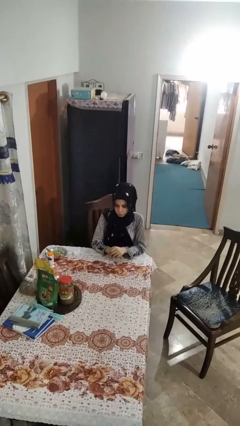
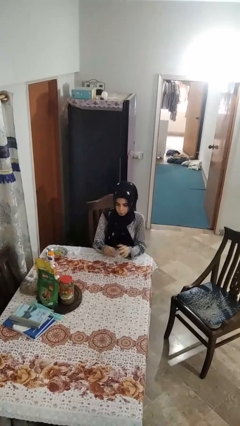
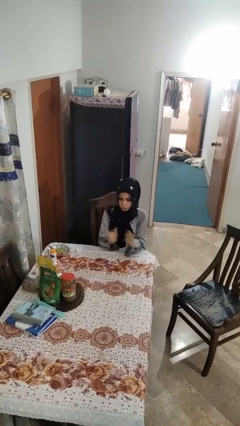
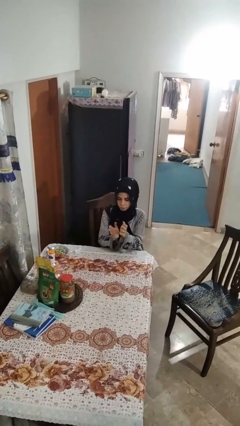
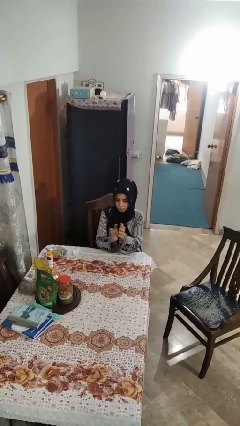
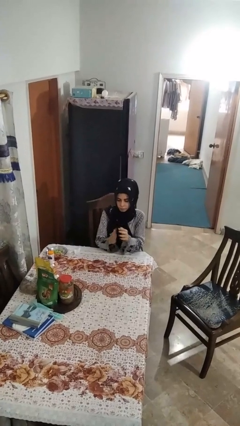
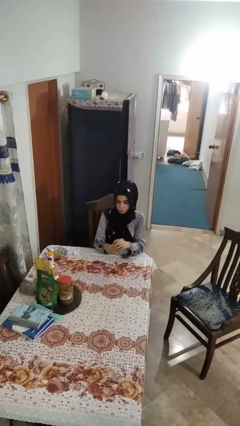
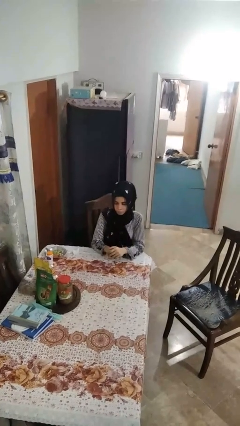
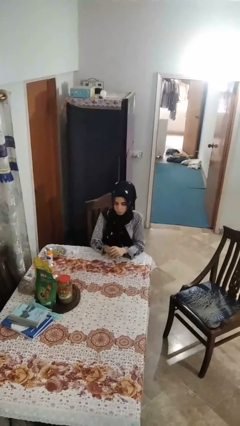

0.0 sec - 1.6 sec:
person claps hands

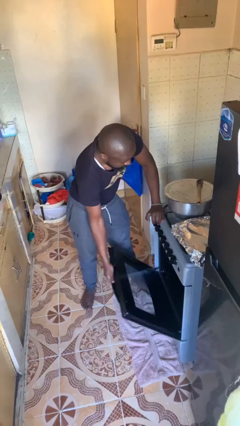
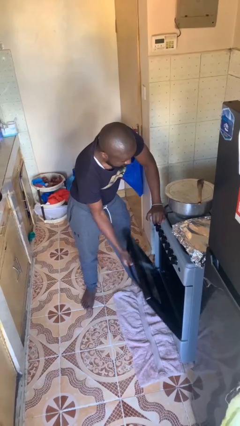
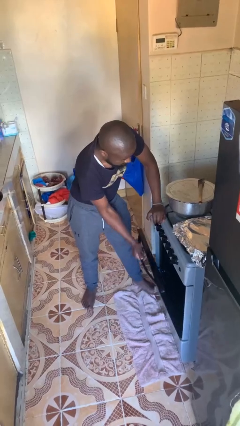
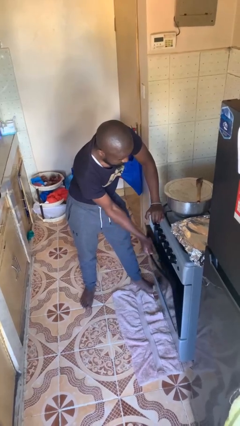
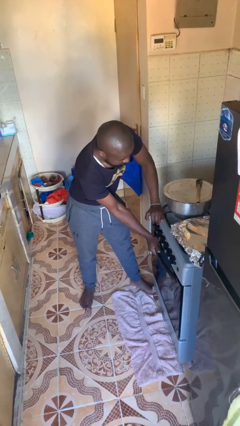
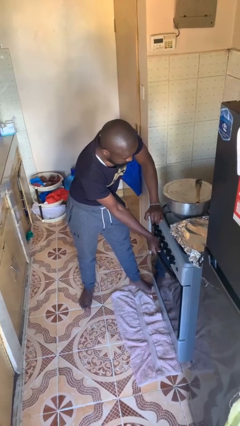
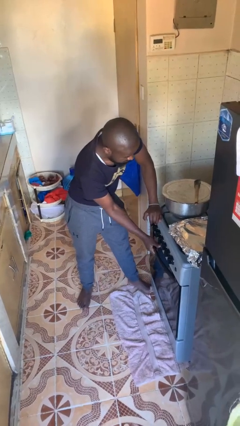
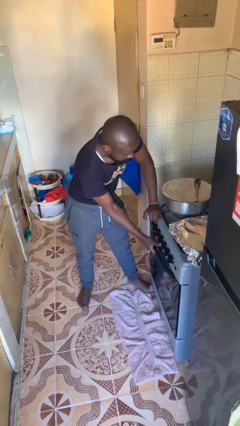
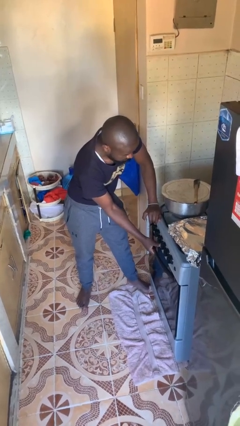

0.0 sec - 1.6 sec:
person closes oven door

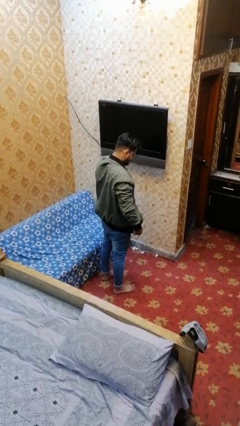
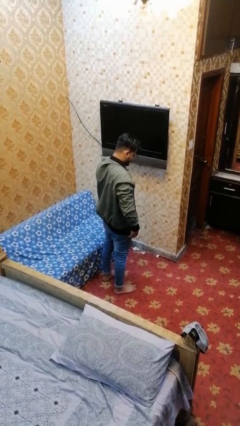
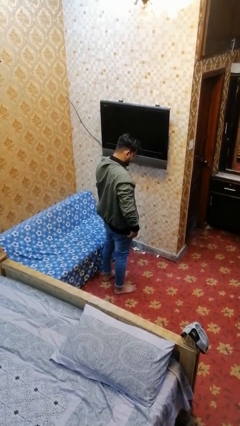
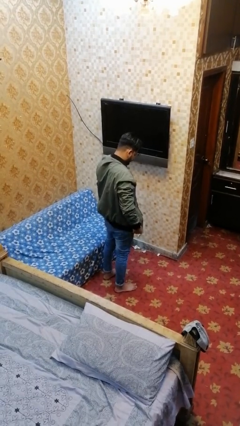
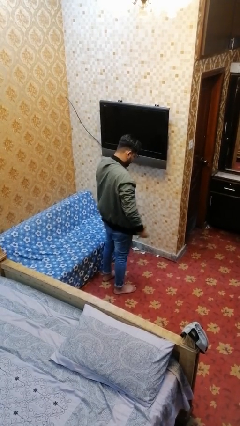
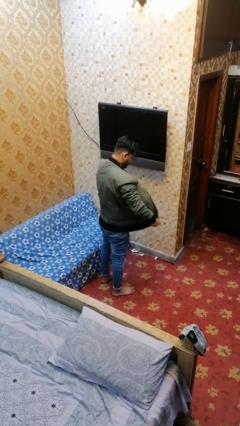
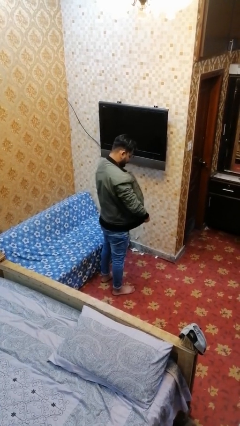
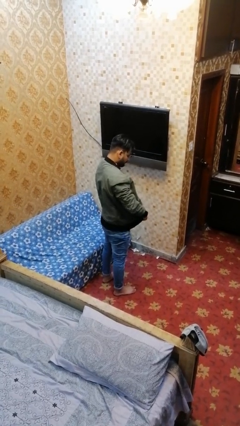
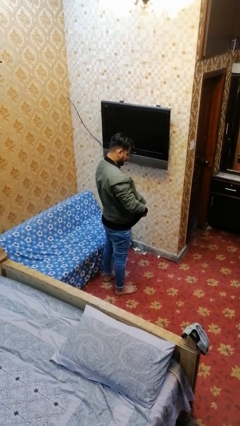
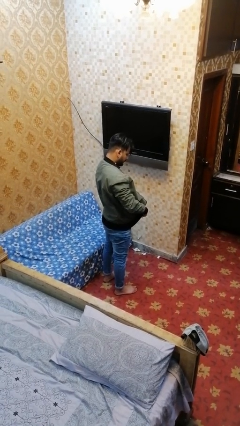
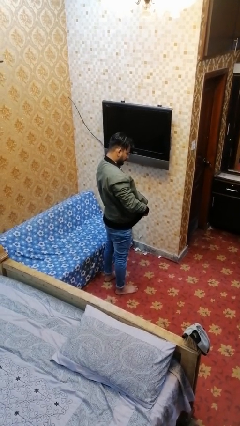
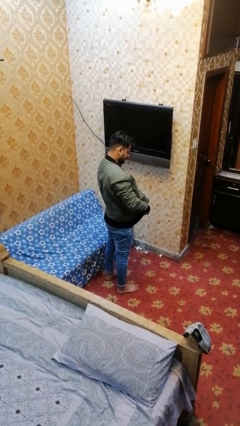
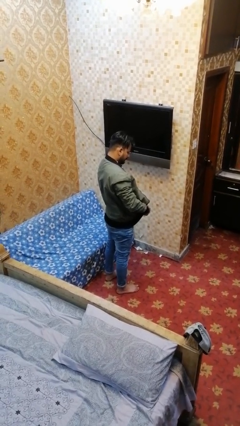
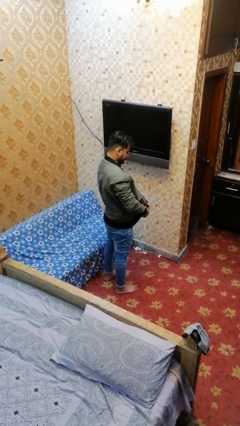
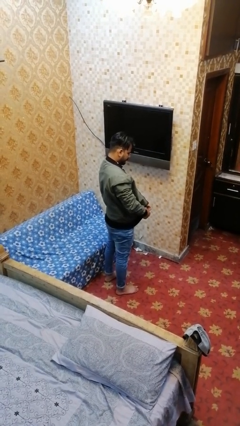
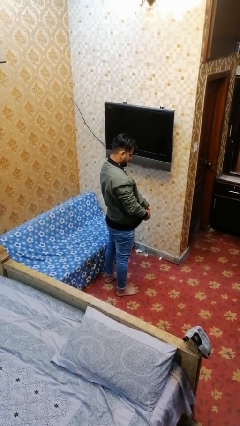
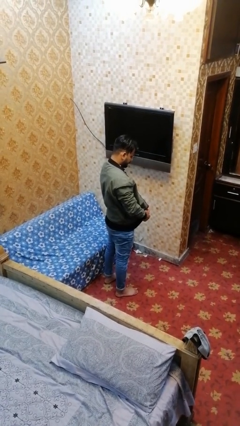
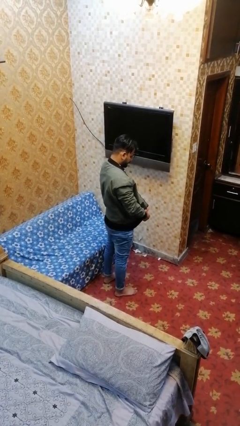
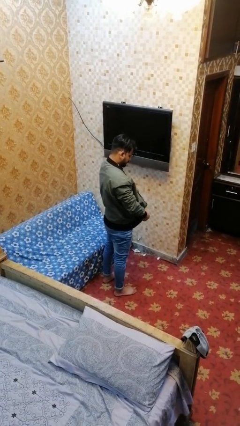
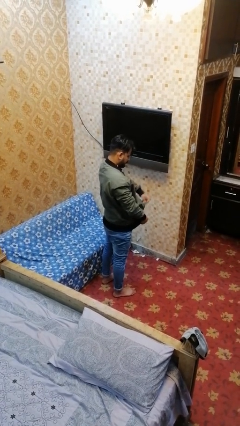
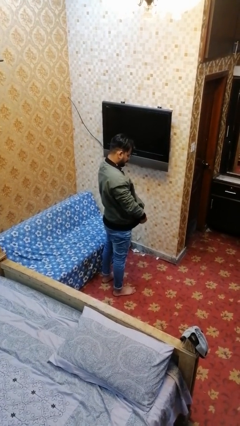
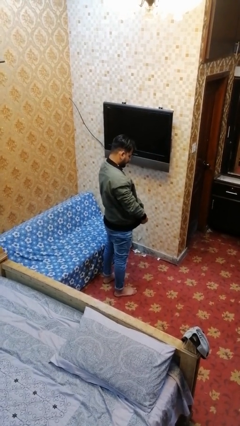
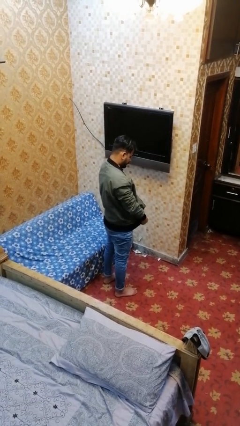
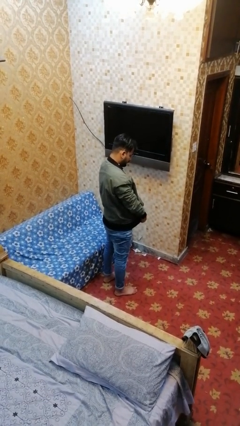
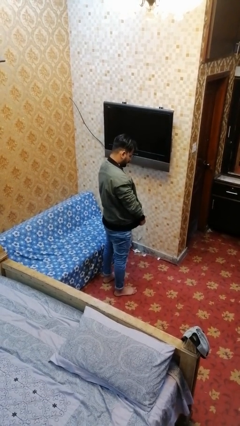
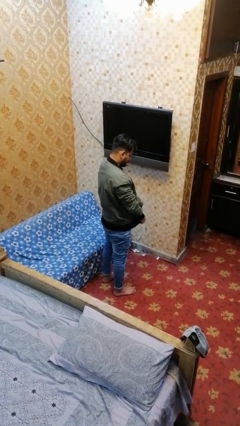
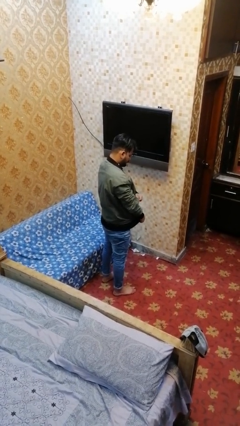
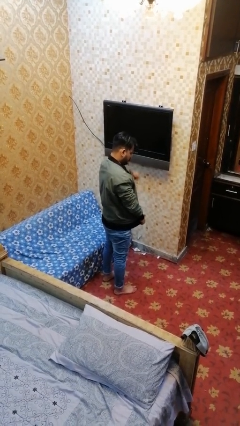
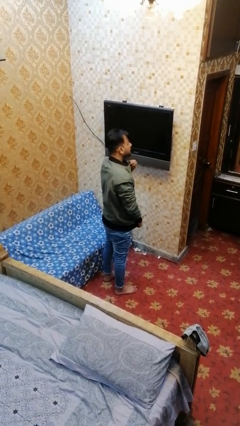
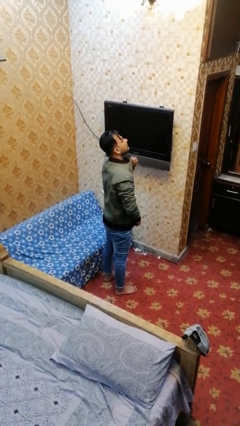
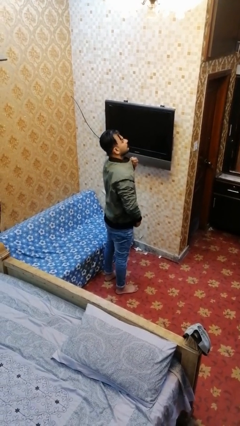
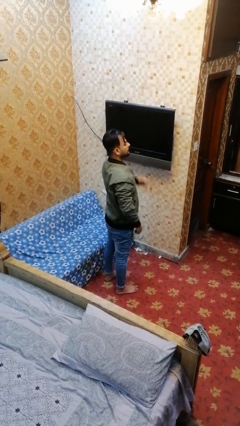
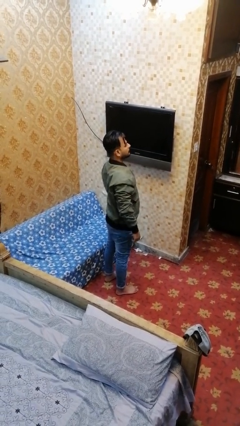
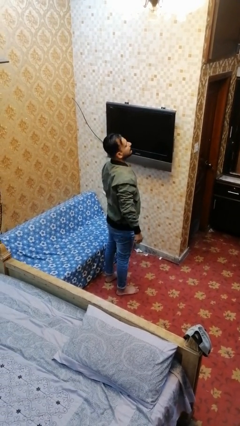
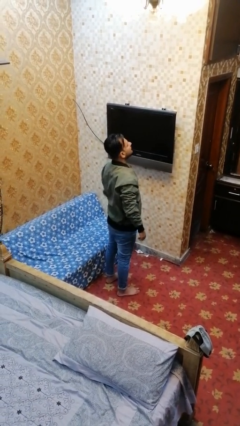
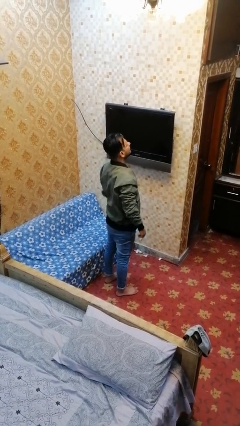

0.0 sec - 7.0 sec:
person zips up jacket

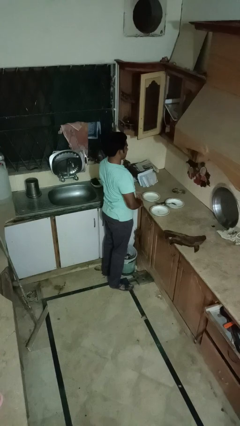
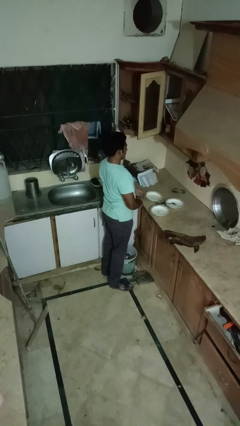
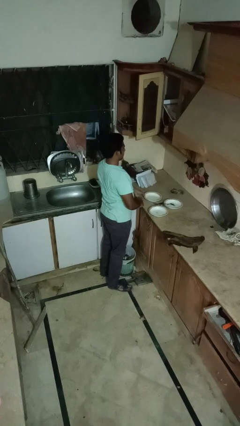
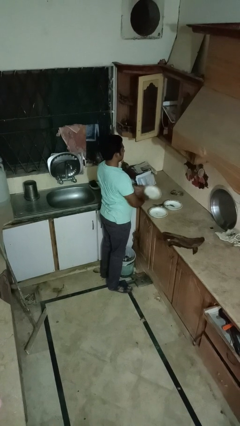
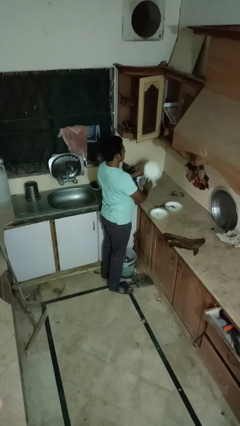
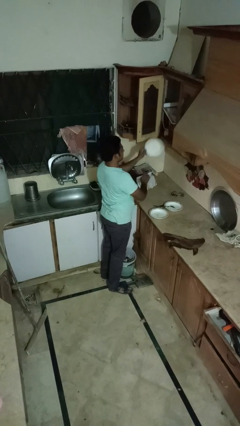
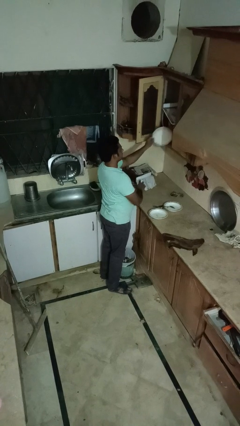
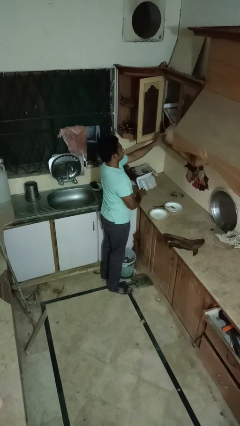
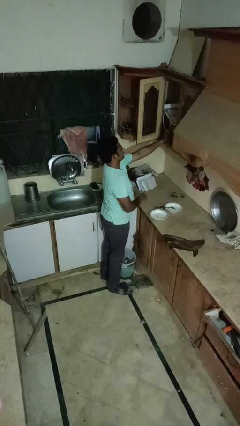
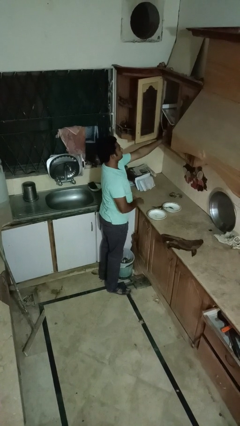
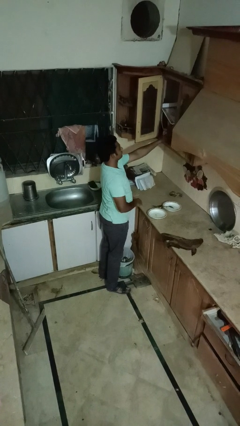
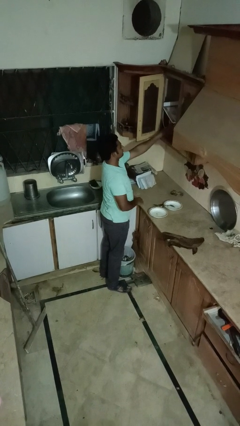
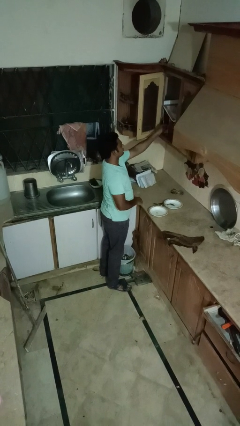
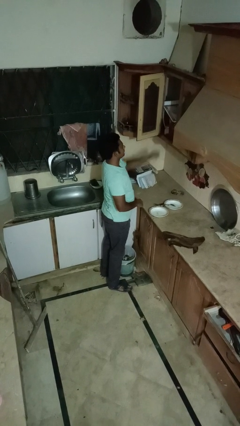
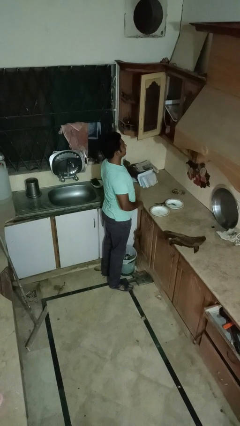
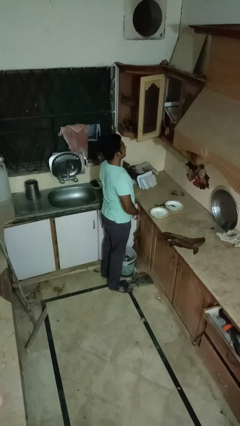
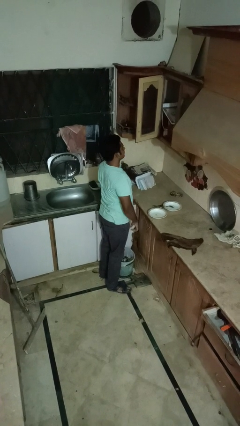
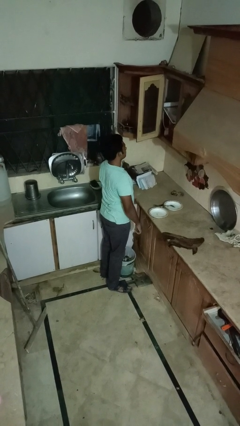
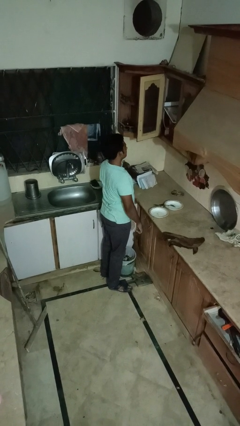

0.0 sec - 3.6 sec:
person puts object in cabinet

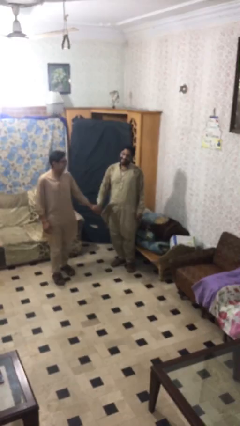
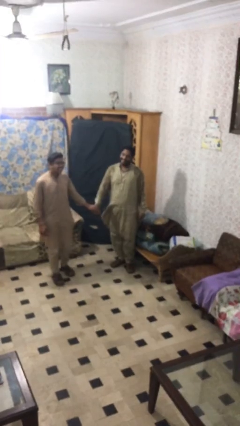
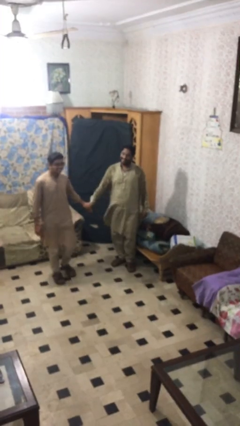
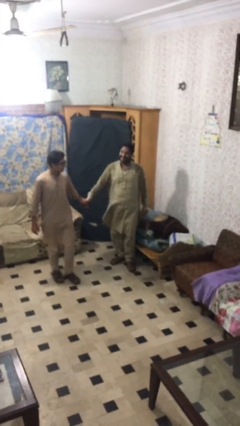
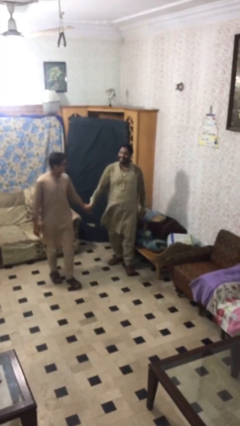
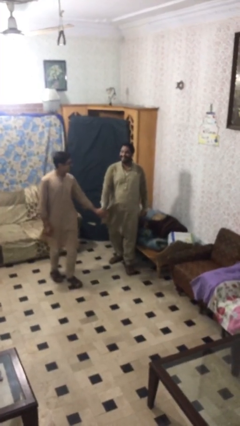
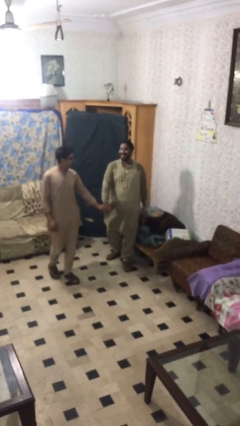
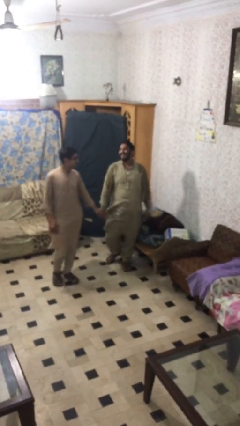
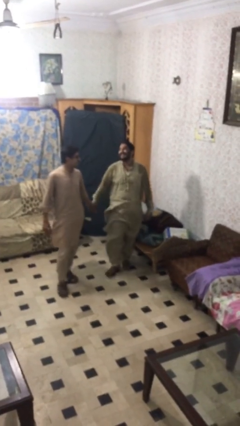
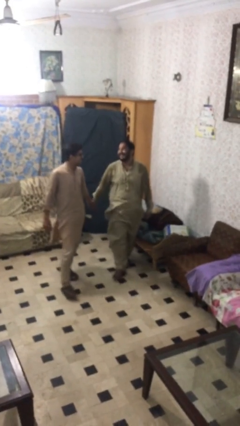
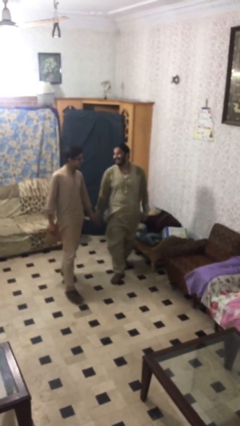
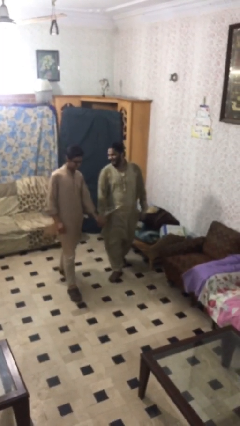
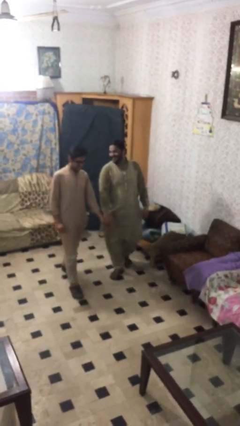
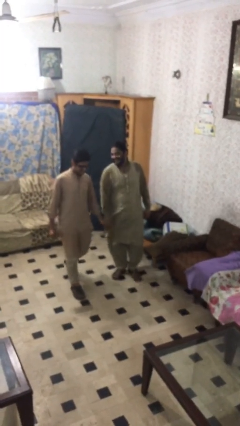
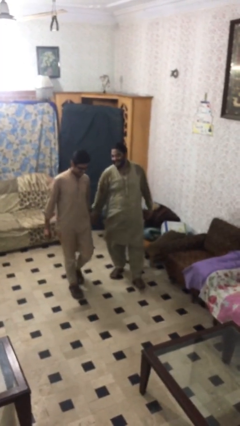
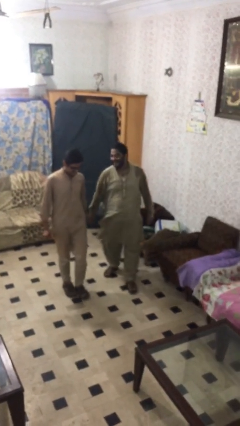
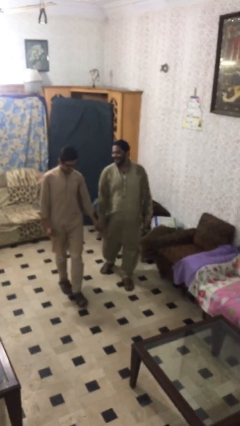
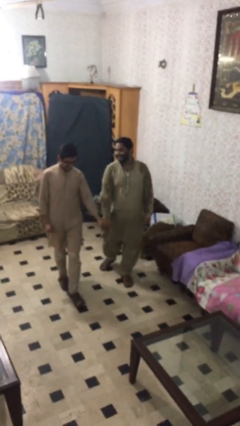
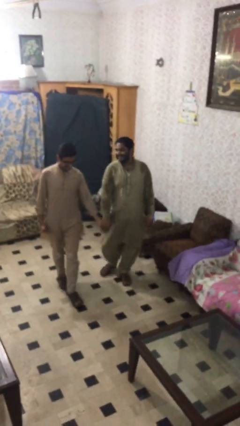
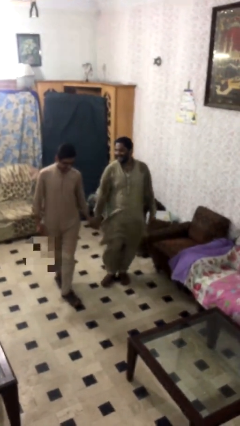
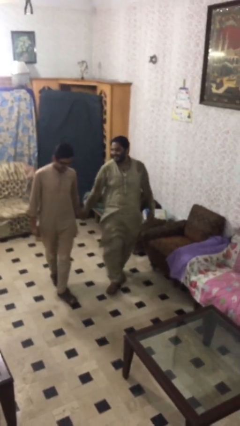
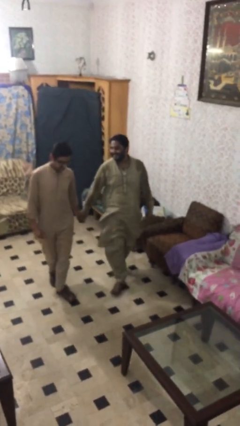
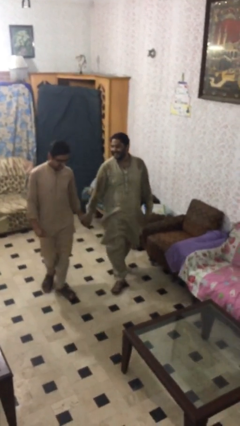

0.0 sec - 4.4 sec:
person holds hand
